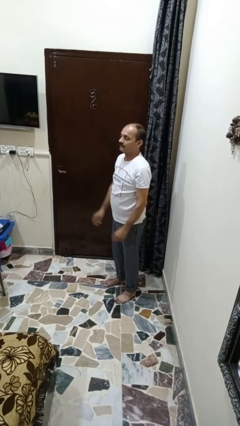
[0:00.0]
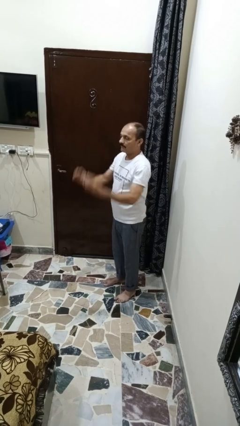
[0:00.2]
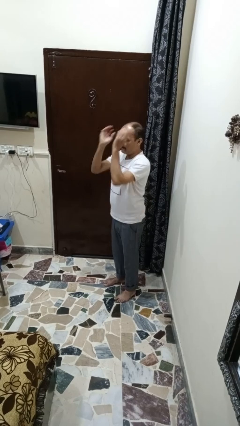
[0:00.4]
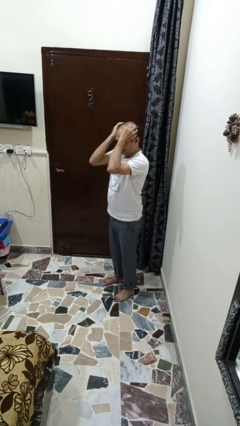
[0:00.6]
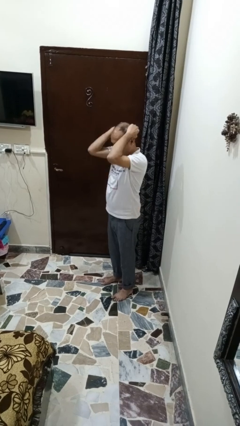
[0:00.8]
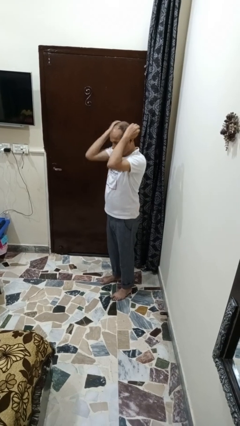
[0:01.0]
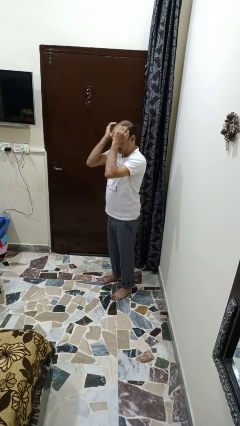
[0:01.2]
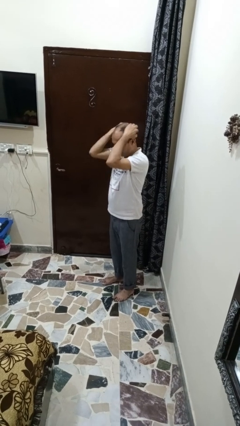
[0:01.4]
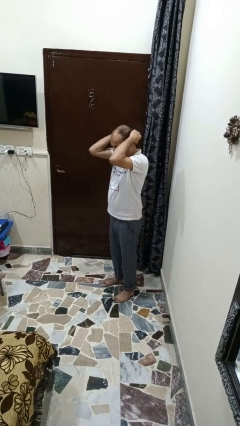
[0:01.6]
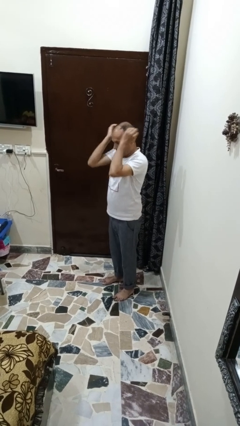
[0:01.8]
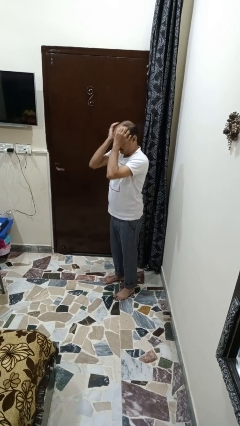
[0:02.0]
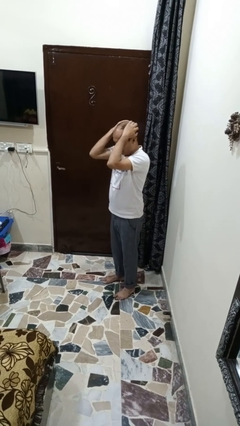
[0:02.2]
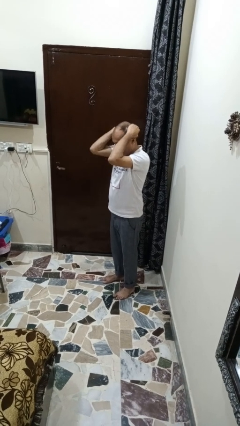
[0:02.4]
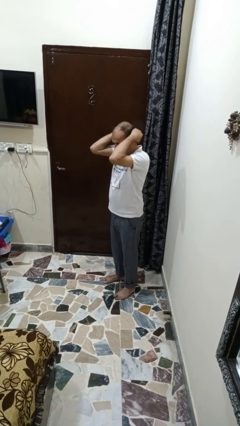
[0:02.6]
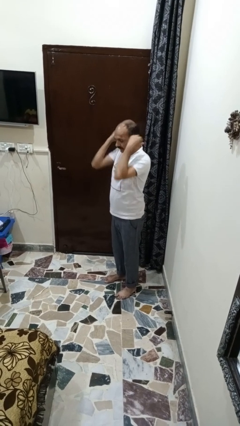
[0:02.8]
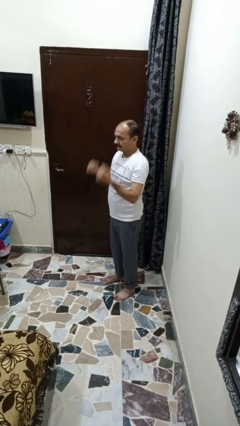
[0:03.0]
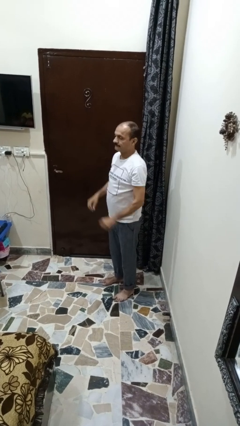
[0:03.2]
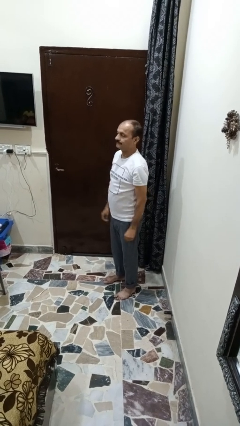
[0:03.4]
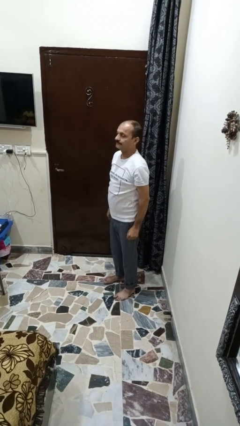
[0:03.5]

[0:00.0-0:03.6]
person strokes hair

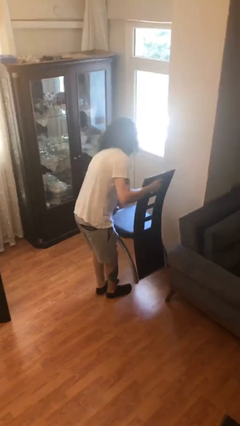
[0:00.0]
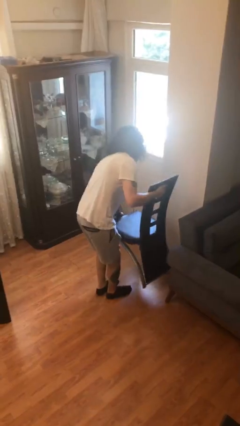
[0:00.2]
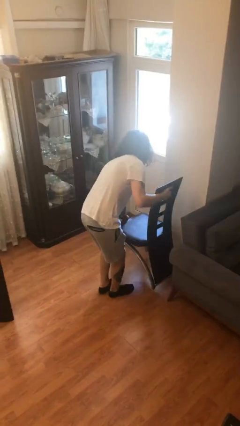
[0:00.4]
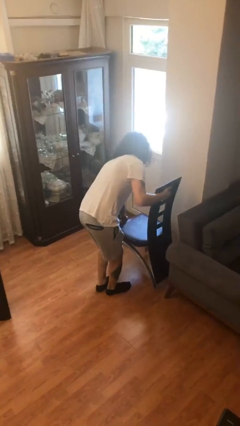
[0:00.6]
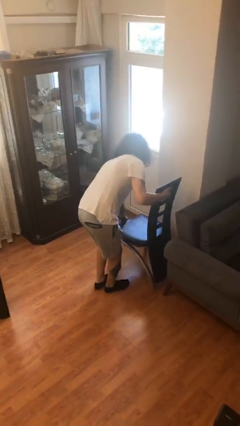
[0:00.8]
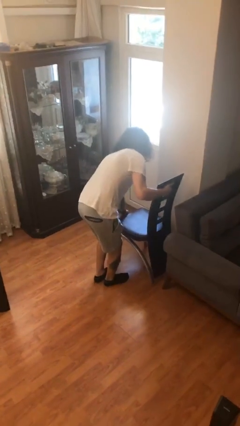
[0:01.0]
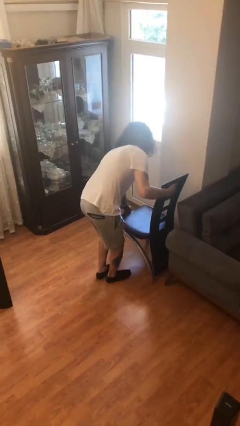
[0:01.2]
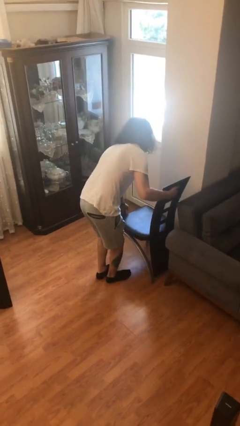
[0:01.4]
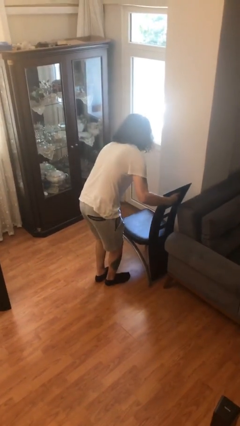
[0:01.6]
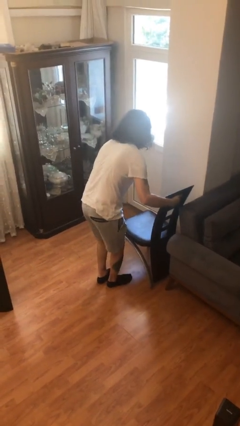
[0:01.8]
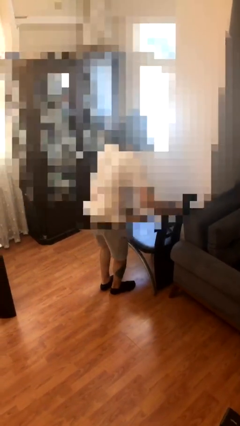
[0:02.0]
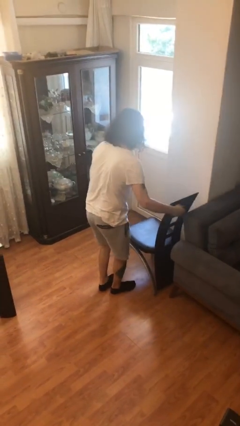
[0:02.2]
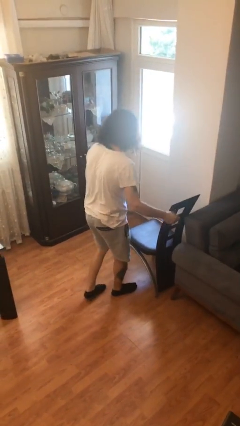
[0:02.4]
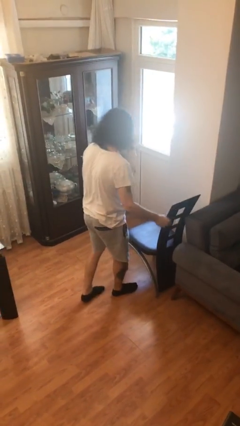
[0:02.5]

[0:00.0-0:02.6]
person puts down object on floor

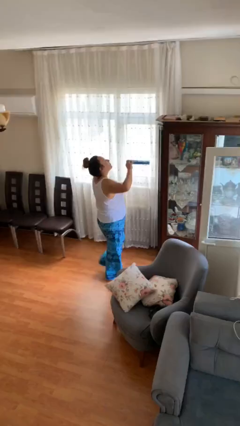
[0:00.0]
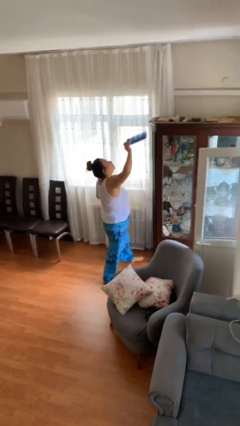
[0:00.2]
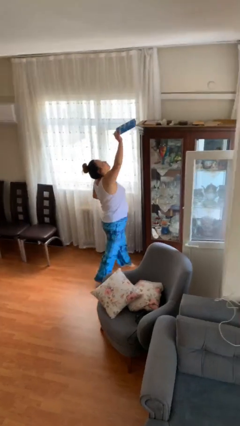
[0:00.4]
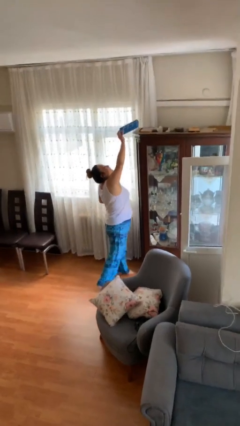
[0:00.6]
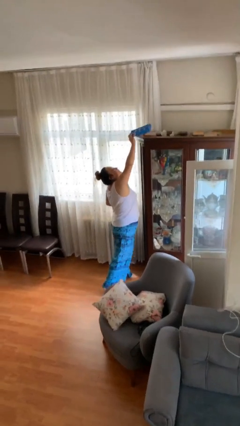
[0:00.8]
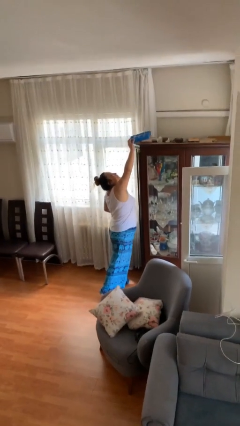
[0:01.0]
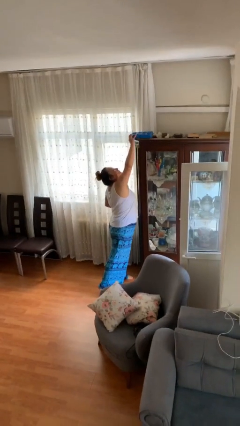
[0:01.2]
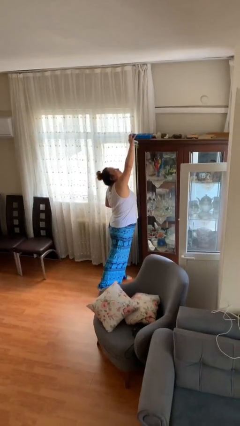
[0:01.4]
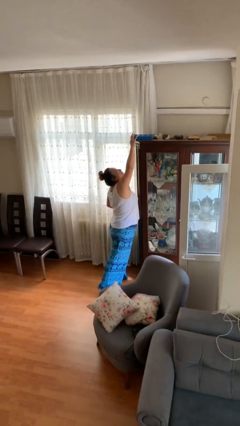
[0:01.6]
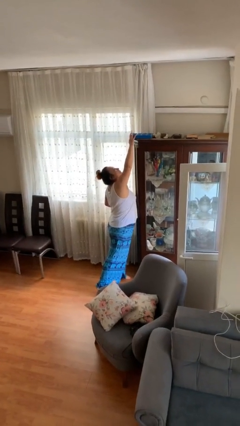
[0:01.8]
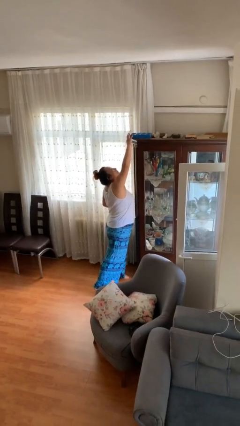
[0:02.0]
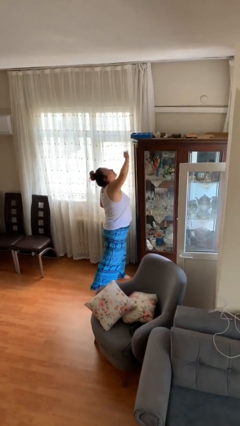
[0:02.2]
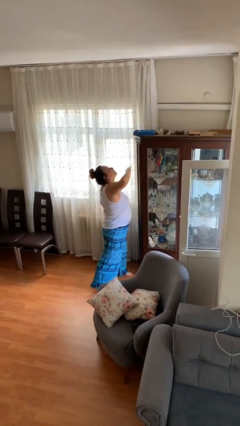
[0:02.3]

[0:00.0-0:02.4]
person puts down object on shelf

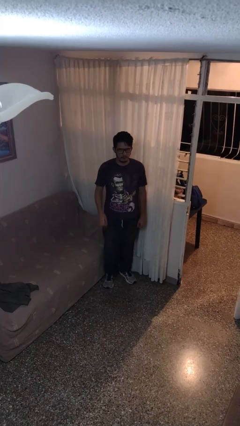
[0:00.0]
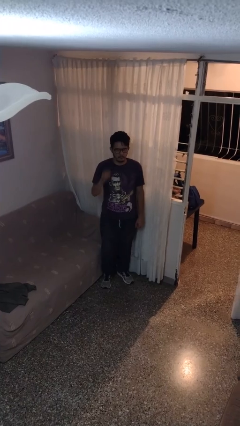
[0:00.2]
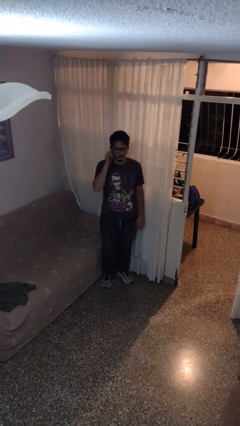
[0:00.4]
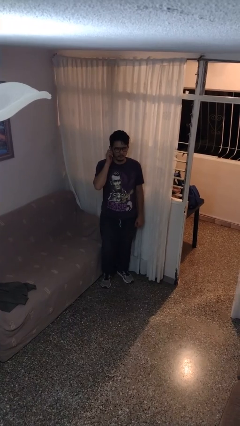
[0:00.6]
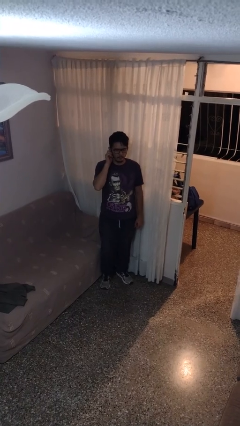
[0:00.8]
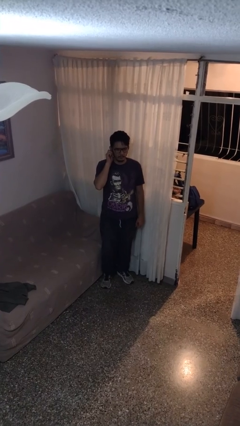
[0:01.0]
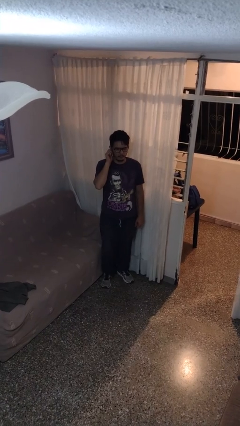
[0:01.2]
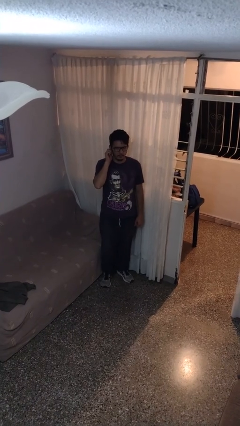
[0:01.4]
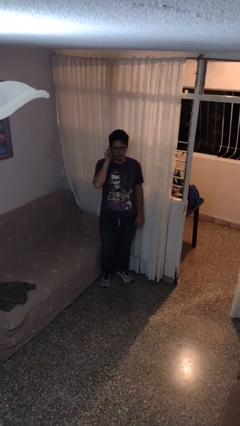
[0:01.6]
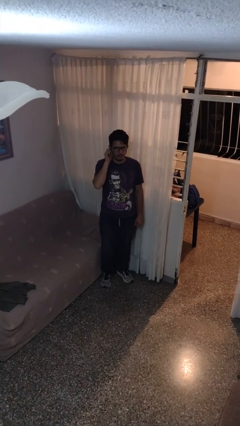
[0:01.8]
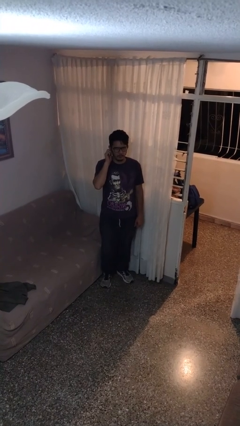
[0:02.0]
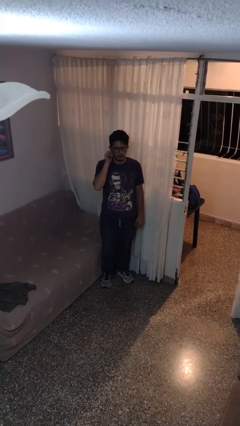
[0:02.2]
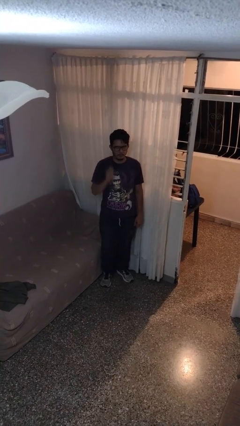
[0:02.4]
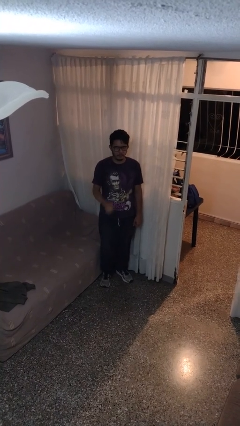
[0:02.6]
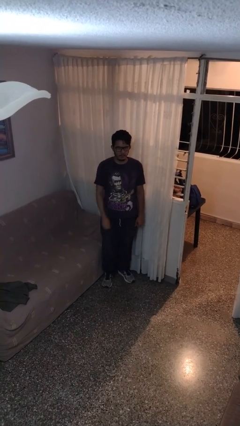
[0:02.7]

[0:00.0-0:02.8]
person touches earlobe

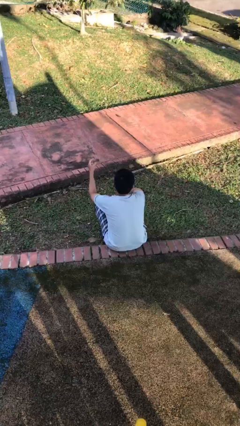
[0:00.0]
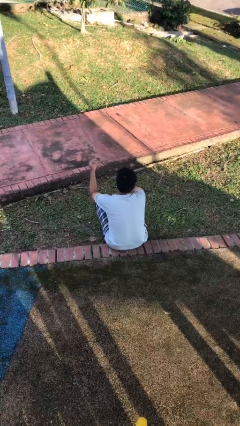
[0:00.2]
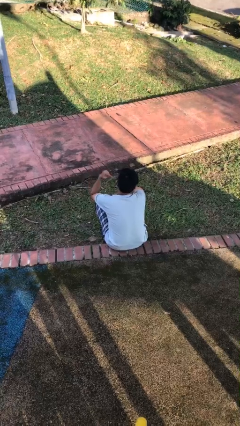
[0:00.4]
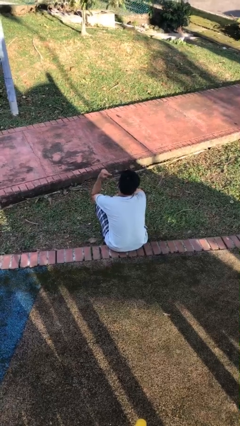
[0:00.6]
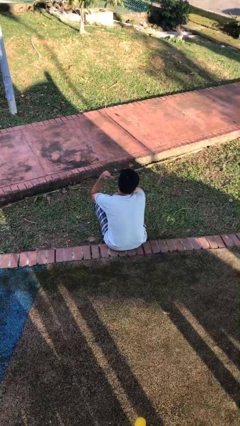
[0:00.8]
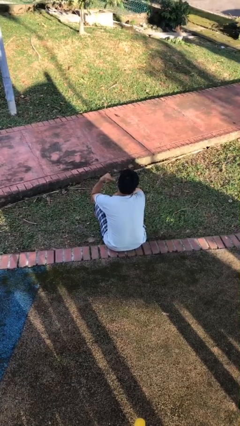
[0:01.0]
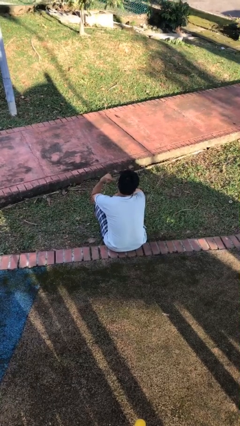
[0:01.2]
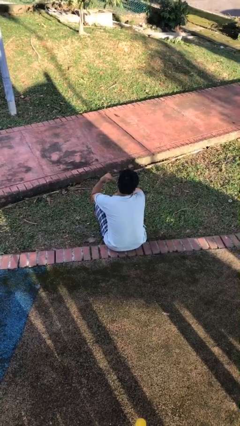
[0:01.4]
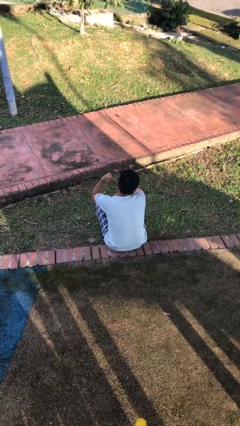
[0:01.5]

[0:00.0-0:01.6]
person gestures listen closely

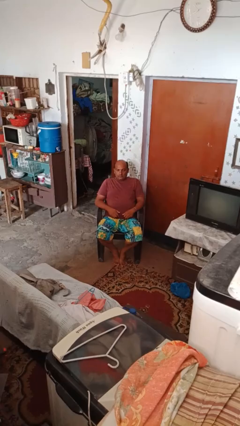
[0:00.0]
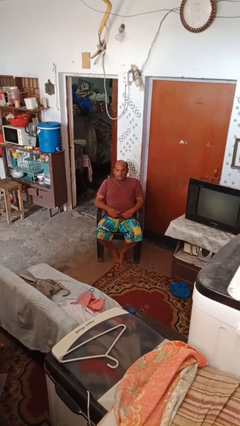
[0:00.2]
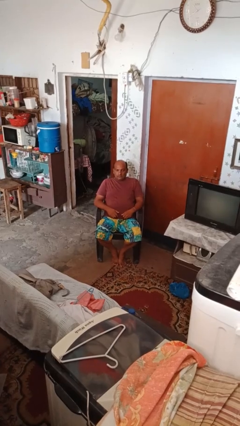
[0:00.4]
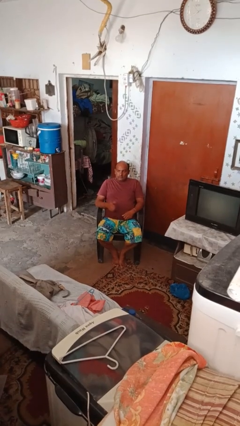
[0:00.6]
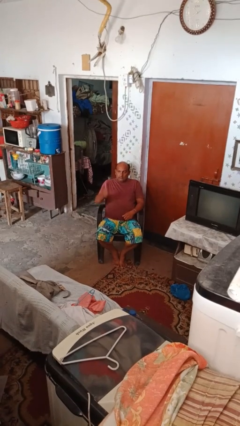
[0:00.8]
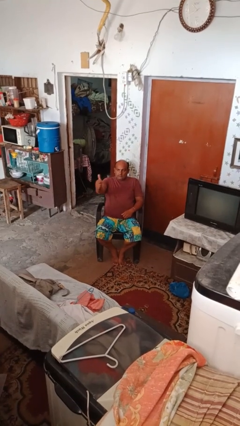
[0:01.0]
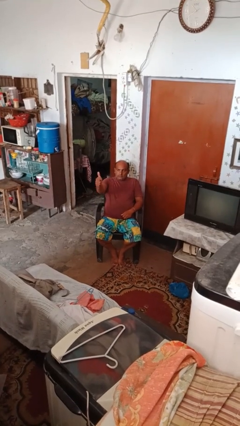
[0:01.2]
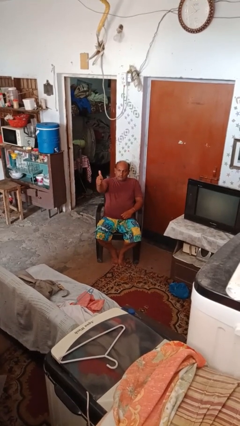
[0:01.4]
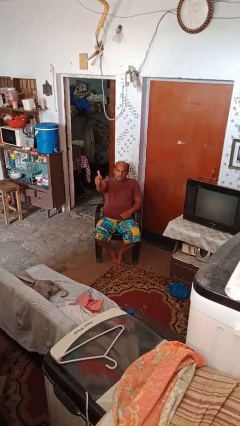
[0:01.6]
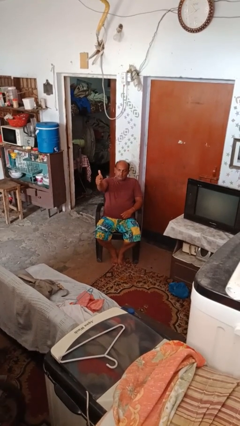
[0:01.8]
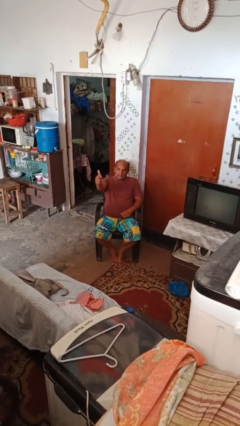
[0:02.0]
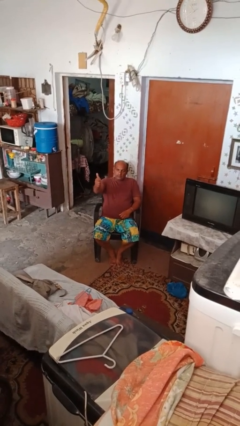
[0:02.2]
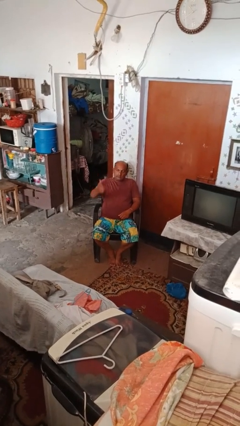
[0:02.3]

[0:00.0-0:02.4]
person gestures thumbs up

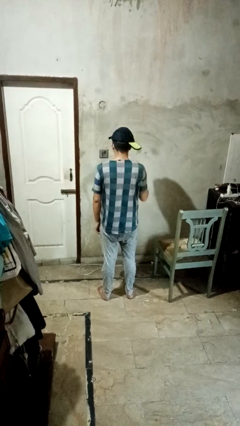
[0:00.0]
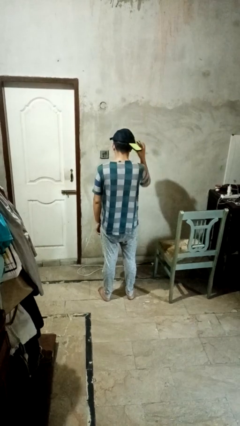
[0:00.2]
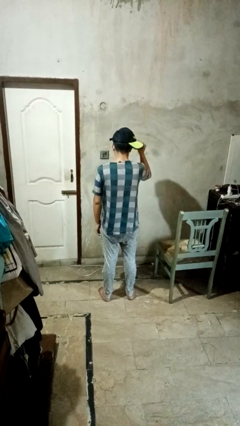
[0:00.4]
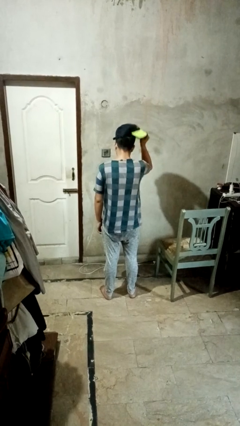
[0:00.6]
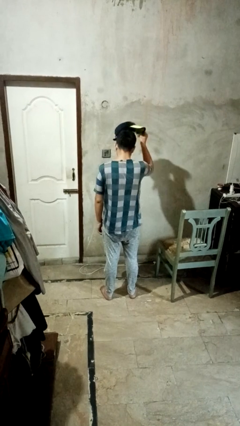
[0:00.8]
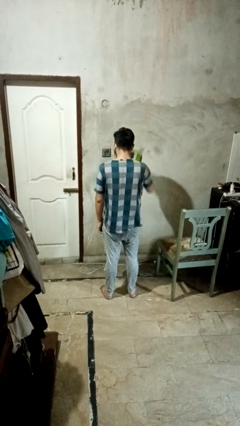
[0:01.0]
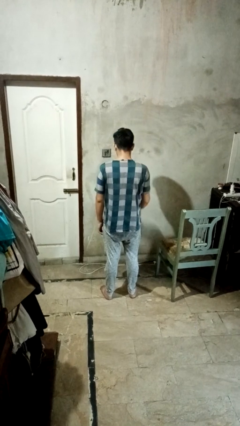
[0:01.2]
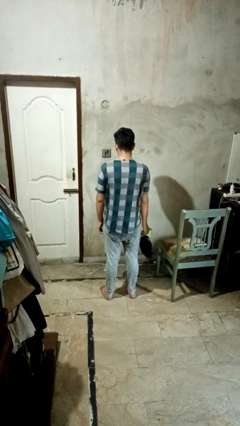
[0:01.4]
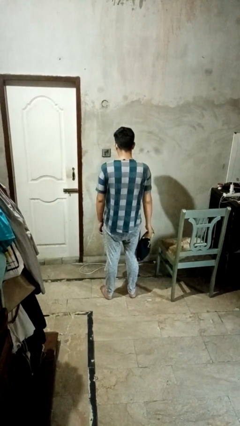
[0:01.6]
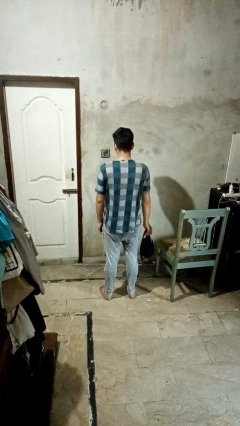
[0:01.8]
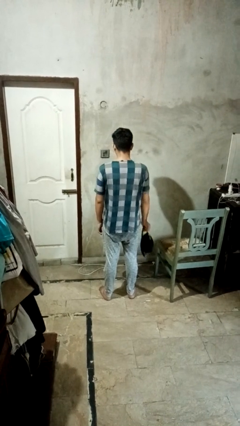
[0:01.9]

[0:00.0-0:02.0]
person takes off hat
